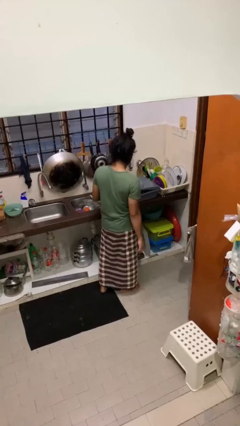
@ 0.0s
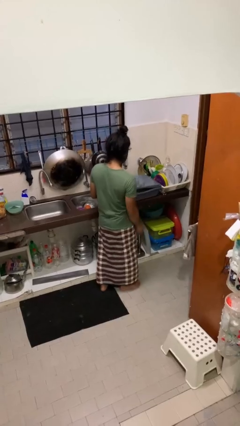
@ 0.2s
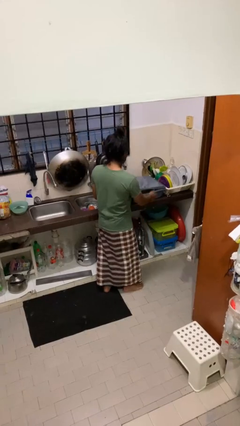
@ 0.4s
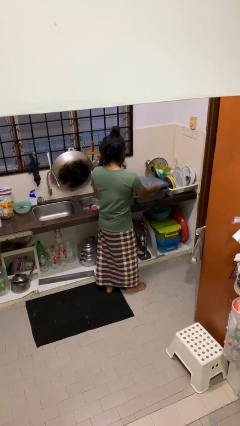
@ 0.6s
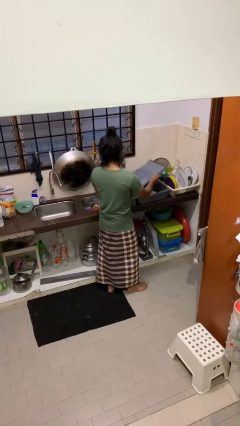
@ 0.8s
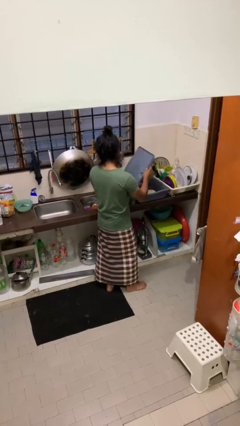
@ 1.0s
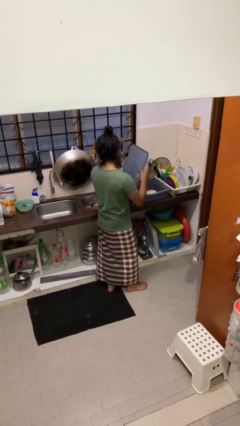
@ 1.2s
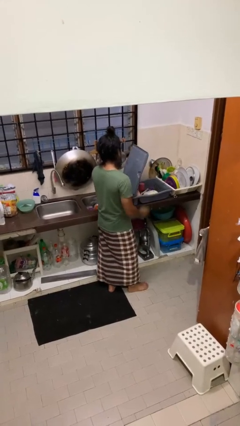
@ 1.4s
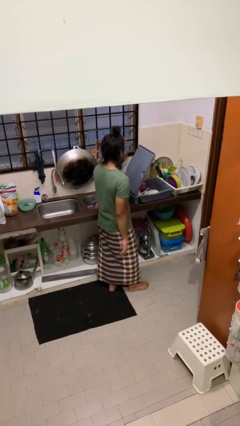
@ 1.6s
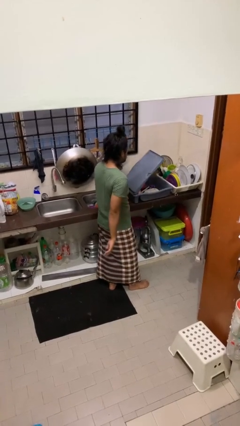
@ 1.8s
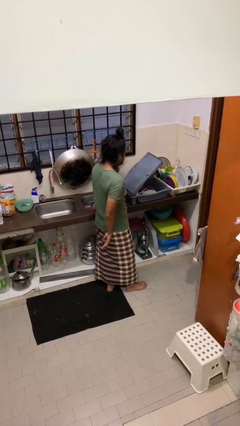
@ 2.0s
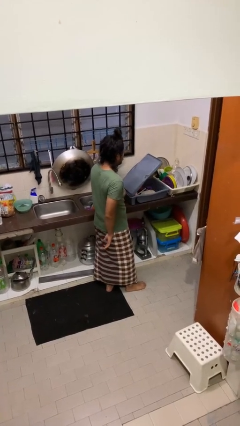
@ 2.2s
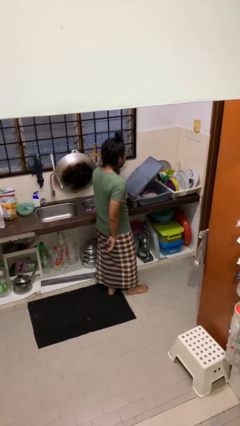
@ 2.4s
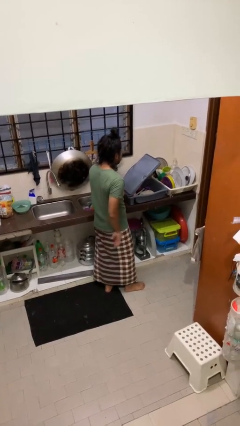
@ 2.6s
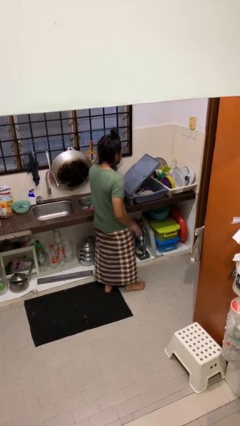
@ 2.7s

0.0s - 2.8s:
person opens dishwasher

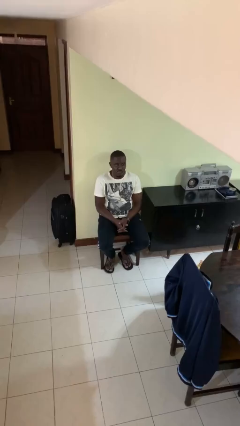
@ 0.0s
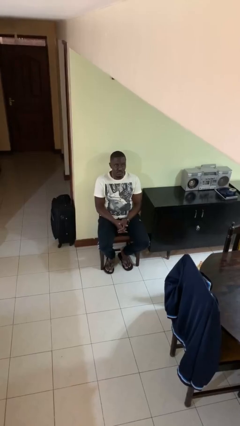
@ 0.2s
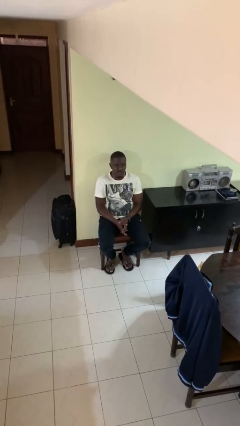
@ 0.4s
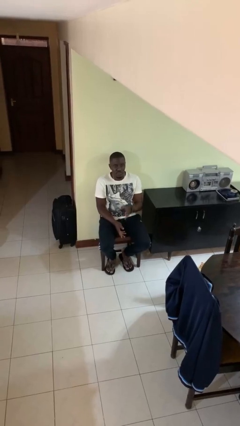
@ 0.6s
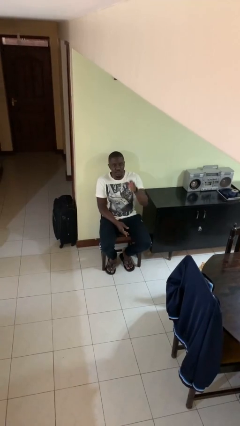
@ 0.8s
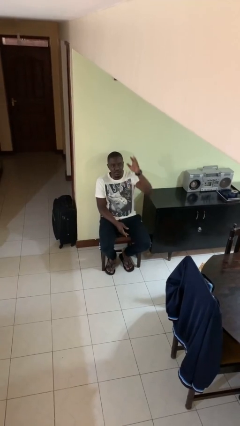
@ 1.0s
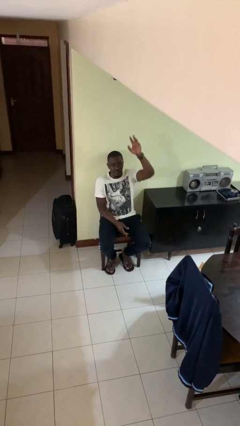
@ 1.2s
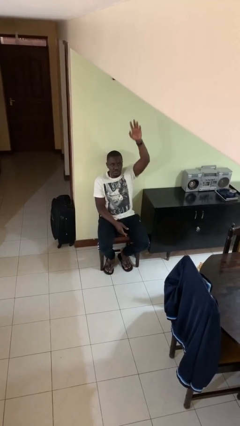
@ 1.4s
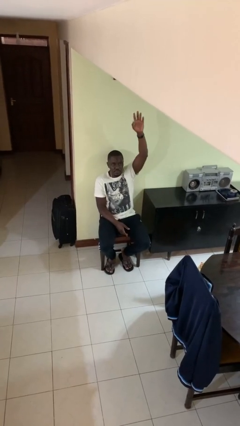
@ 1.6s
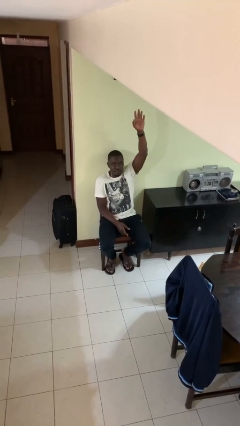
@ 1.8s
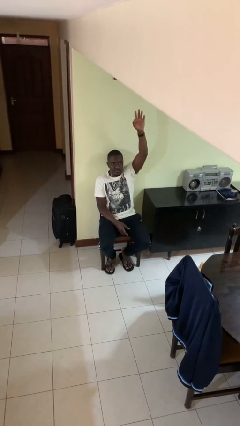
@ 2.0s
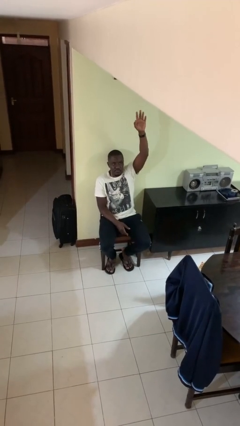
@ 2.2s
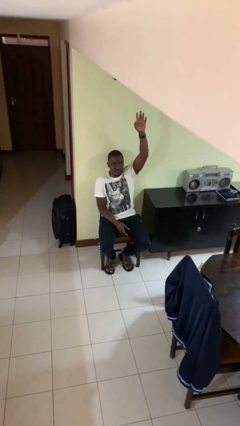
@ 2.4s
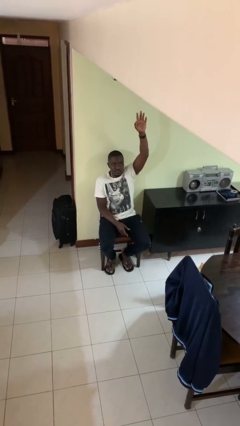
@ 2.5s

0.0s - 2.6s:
person gestures raise hand

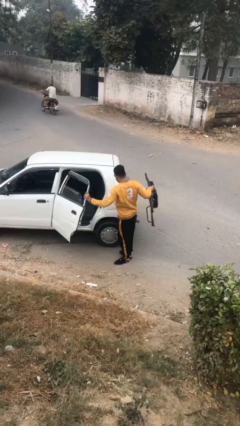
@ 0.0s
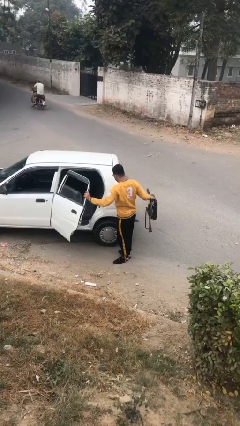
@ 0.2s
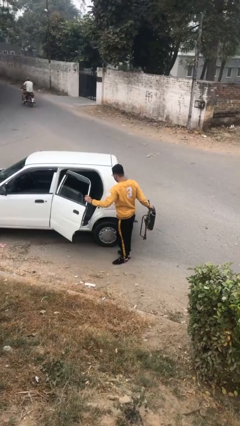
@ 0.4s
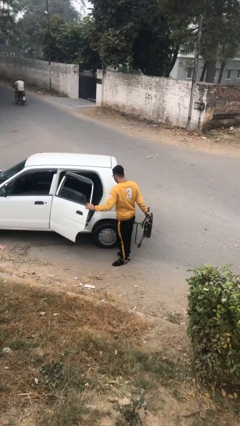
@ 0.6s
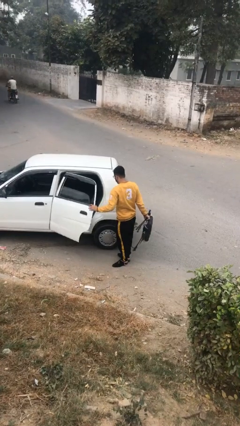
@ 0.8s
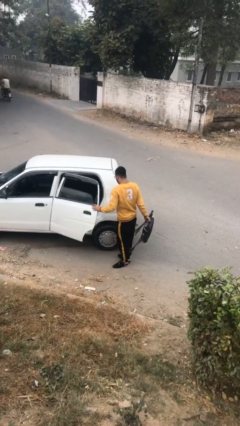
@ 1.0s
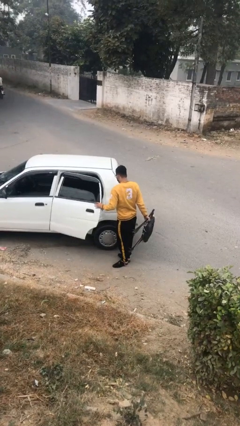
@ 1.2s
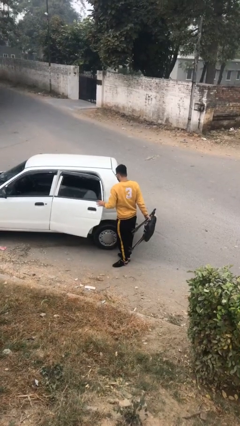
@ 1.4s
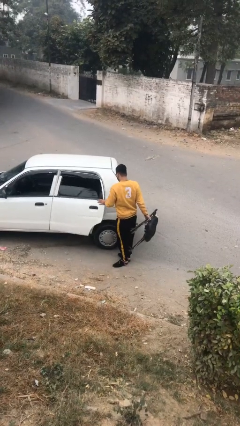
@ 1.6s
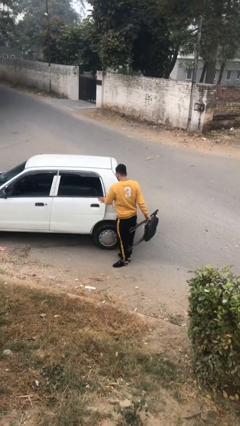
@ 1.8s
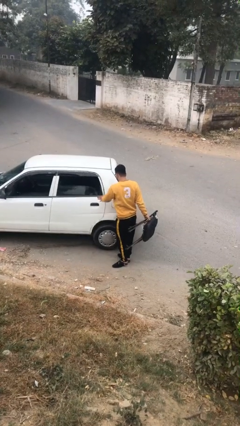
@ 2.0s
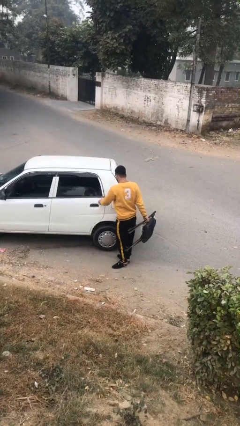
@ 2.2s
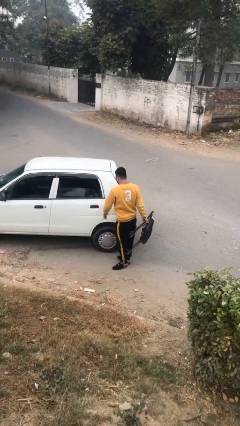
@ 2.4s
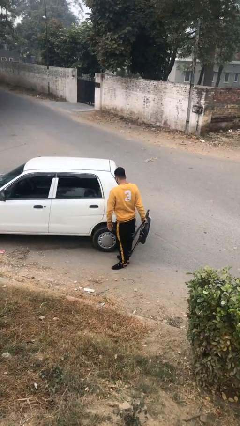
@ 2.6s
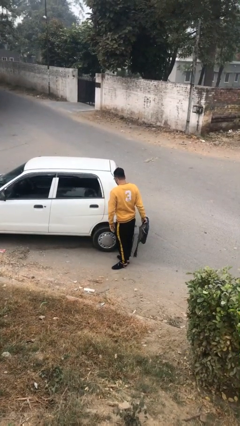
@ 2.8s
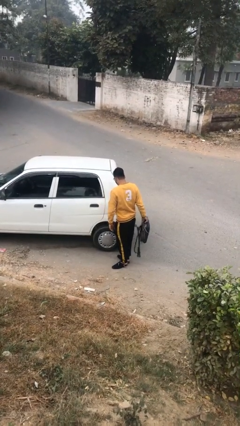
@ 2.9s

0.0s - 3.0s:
person closes car door

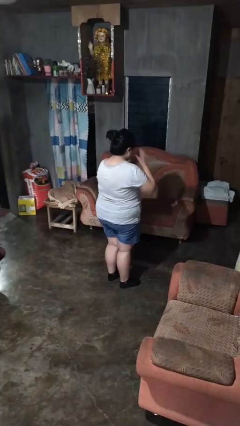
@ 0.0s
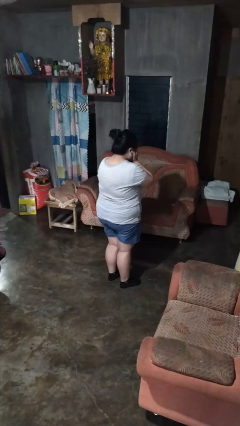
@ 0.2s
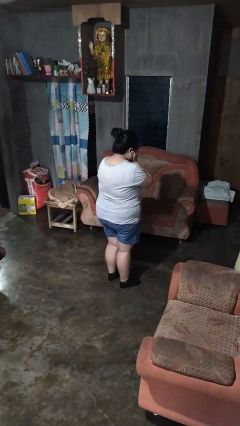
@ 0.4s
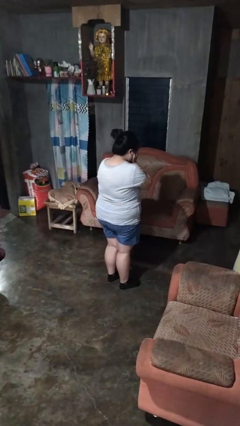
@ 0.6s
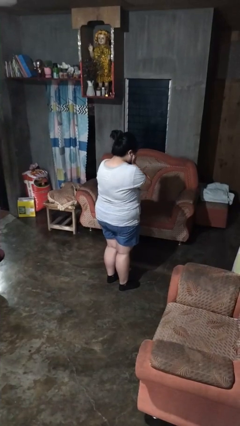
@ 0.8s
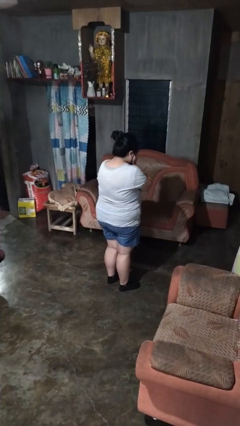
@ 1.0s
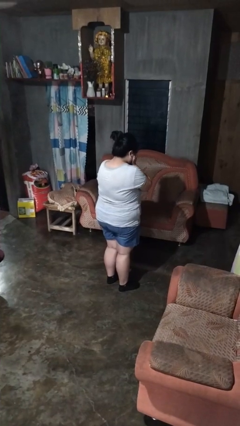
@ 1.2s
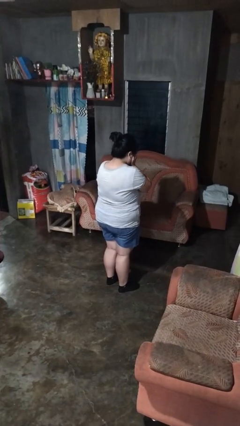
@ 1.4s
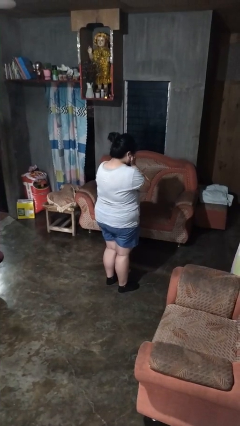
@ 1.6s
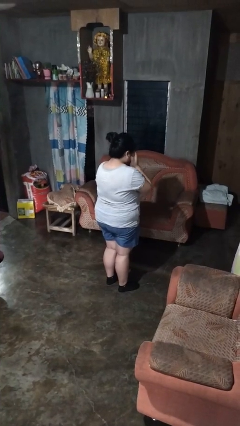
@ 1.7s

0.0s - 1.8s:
person covers face with hands

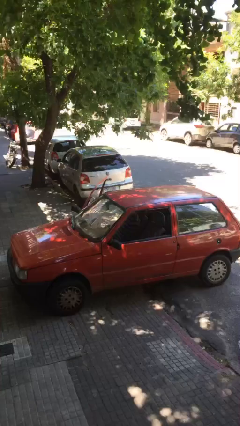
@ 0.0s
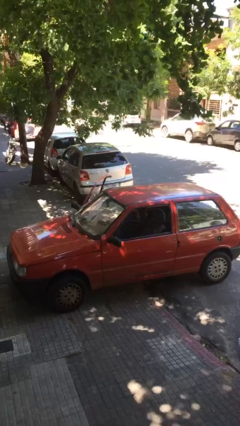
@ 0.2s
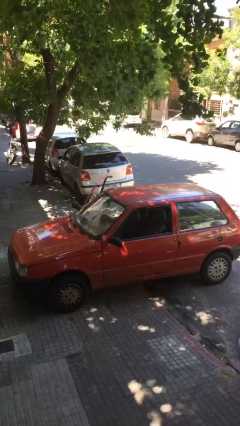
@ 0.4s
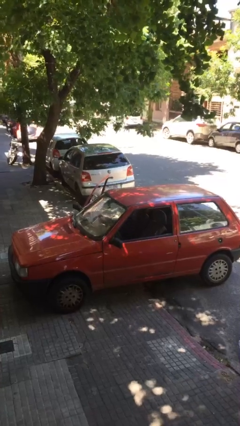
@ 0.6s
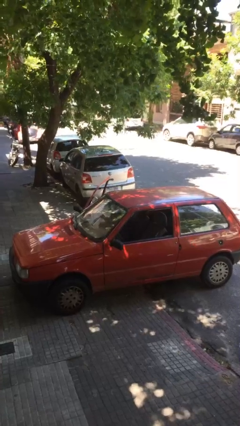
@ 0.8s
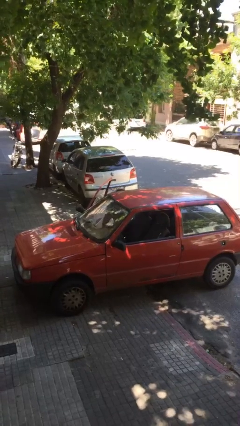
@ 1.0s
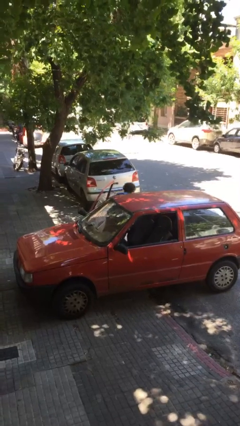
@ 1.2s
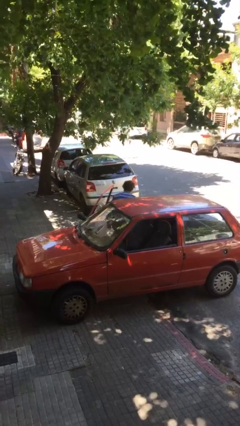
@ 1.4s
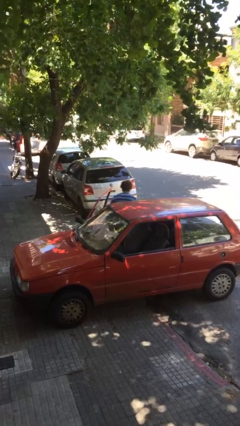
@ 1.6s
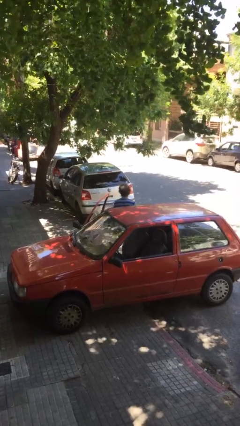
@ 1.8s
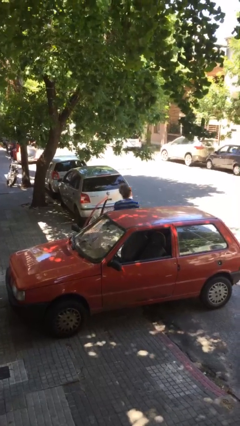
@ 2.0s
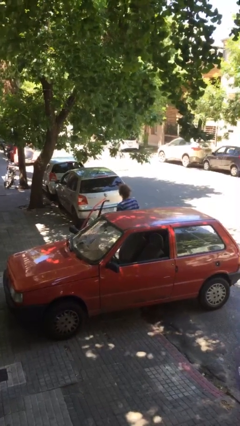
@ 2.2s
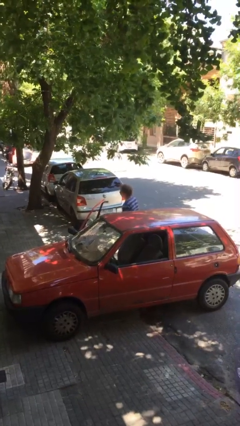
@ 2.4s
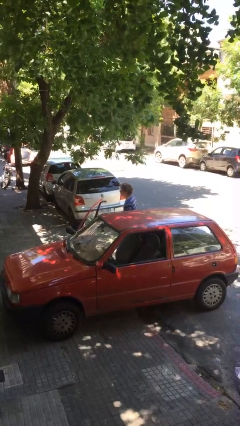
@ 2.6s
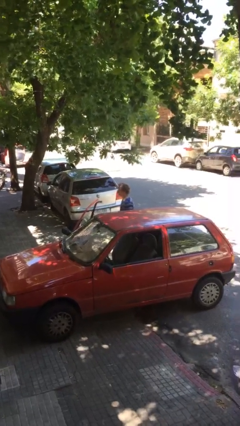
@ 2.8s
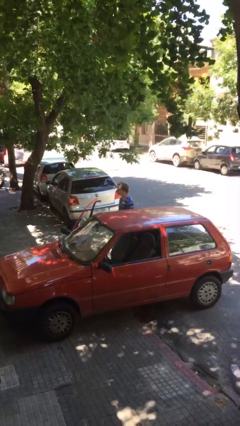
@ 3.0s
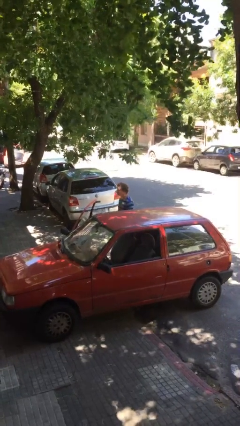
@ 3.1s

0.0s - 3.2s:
person exits car

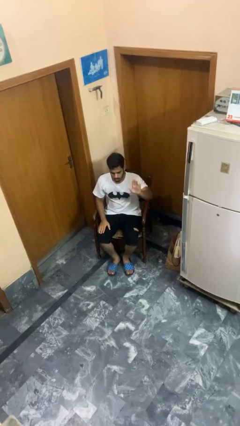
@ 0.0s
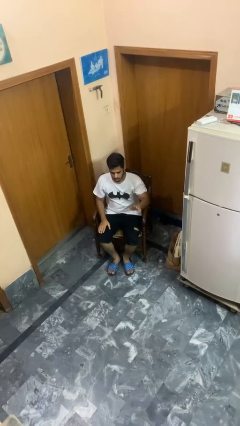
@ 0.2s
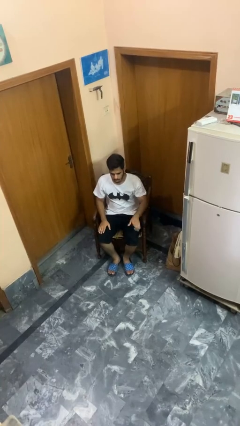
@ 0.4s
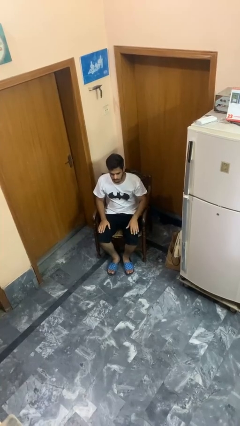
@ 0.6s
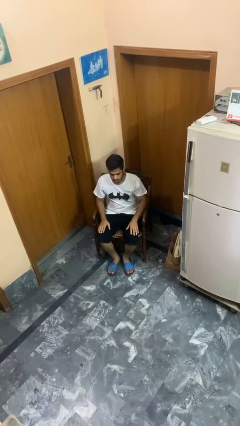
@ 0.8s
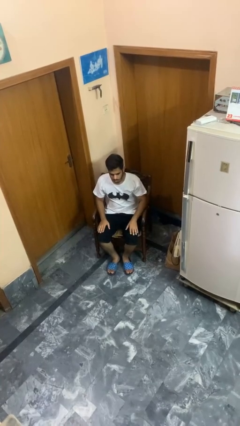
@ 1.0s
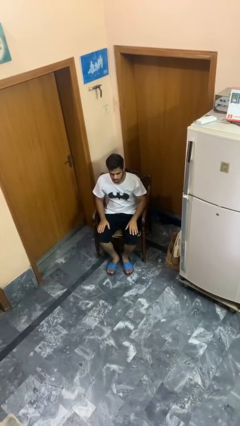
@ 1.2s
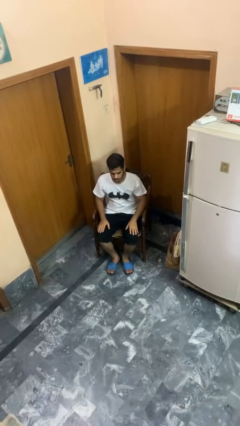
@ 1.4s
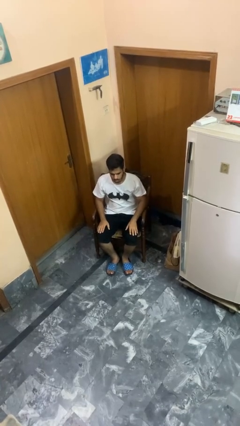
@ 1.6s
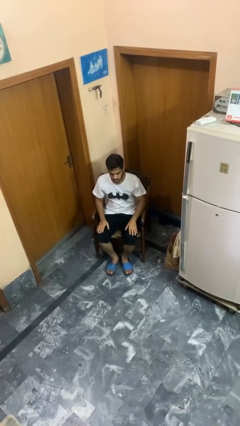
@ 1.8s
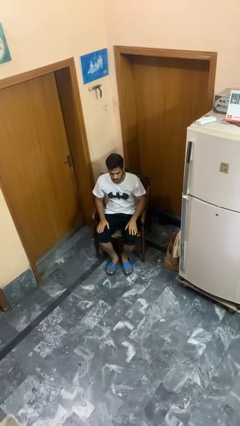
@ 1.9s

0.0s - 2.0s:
person gestures lower hand

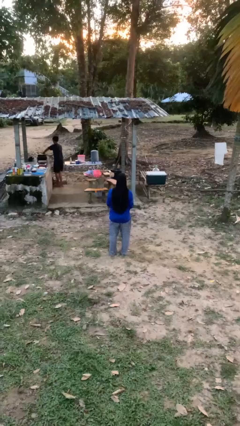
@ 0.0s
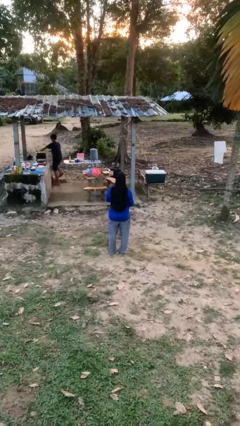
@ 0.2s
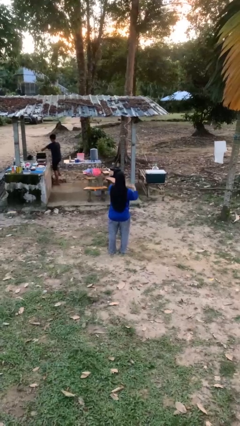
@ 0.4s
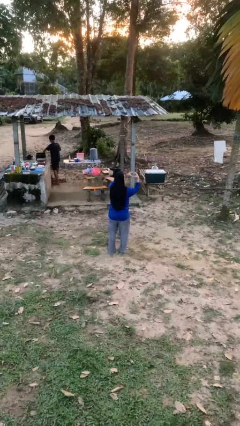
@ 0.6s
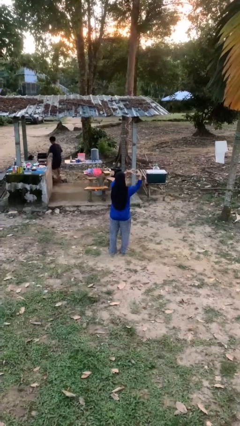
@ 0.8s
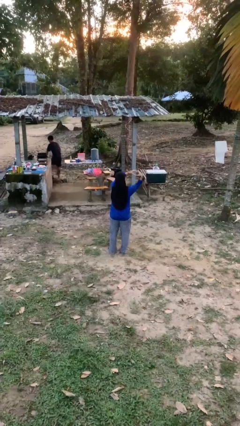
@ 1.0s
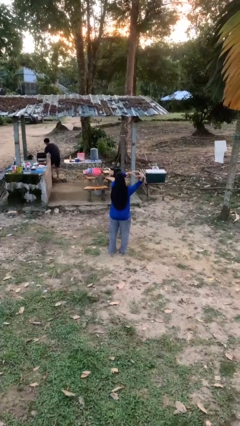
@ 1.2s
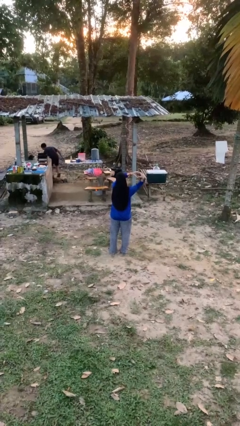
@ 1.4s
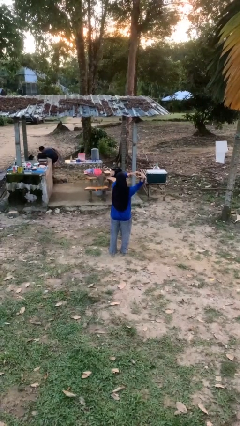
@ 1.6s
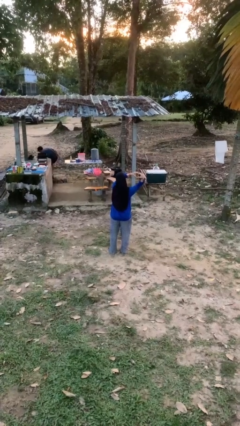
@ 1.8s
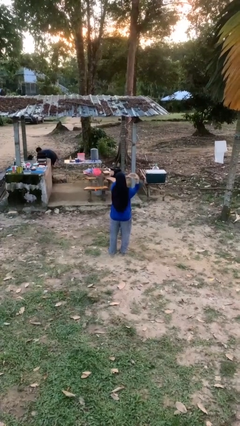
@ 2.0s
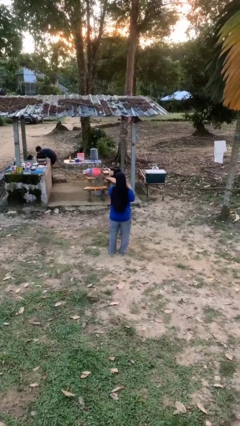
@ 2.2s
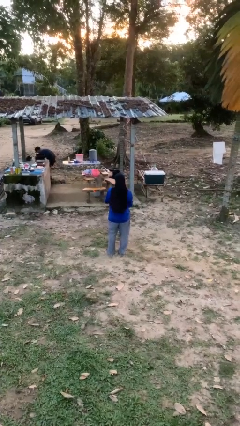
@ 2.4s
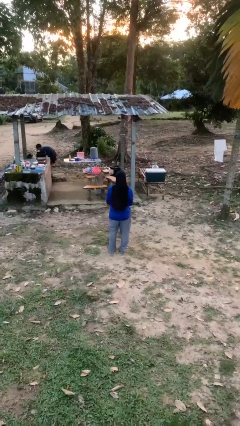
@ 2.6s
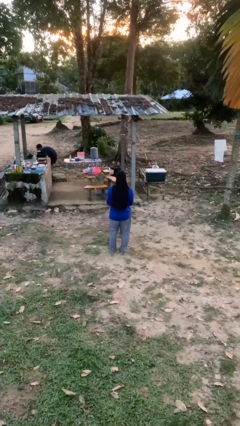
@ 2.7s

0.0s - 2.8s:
person gestures heart
